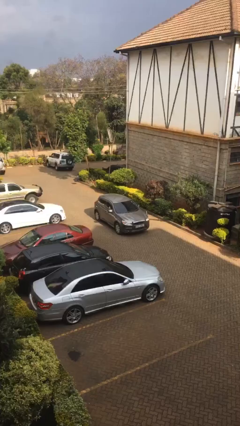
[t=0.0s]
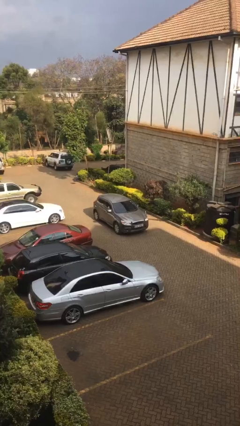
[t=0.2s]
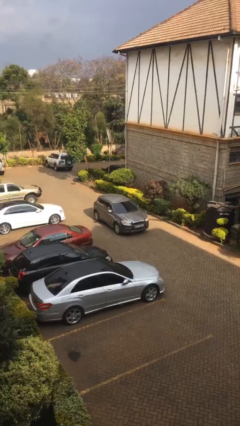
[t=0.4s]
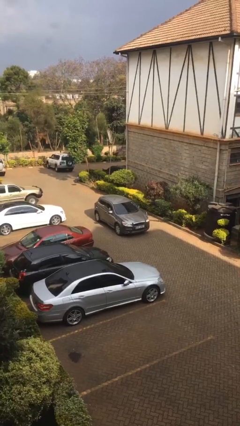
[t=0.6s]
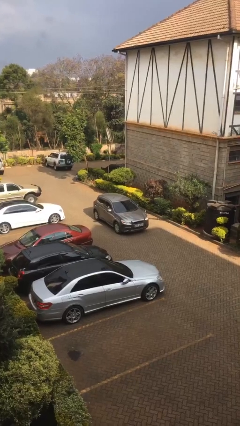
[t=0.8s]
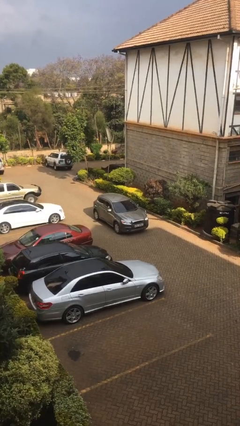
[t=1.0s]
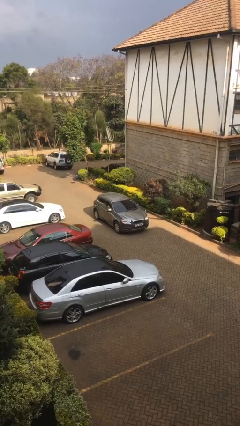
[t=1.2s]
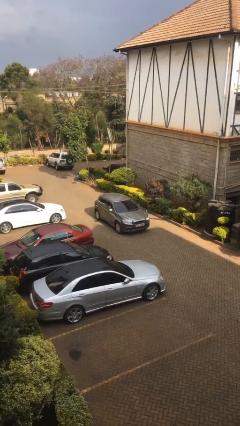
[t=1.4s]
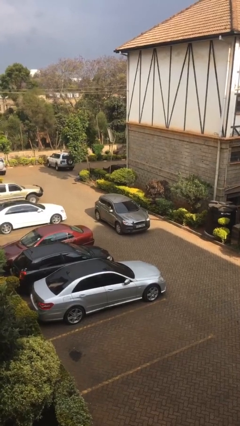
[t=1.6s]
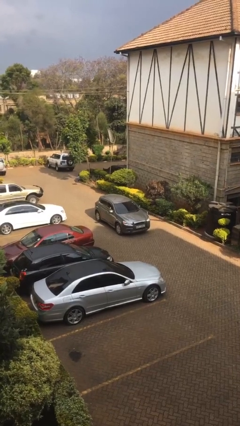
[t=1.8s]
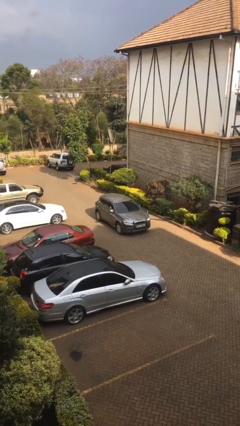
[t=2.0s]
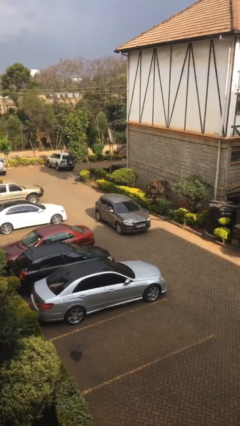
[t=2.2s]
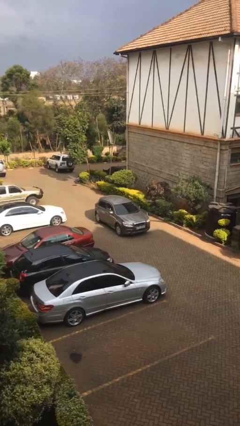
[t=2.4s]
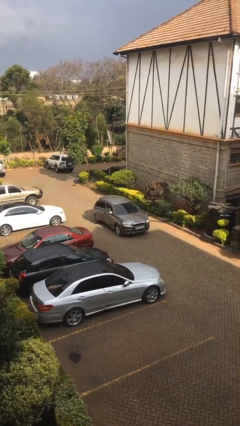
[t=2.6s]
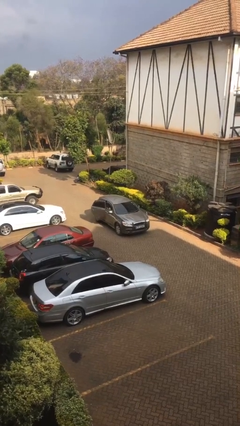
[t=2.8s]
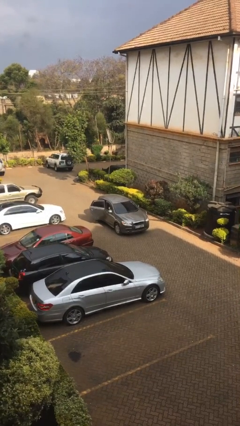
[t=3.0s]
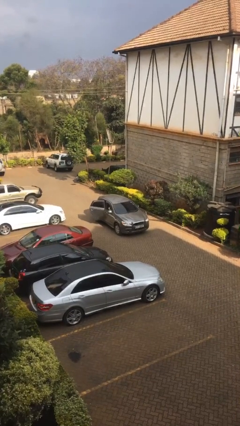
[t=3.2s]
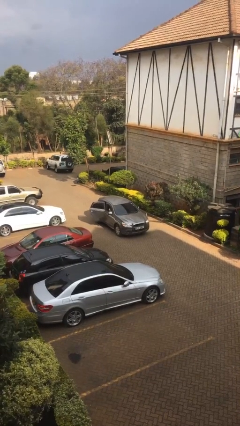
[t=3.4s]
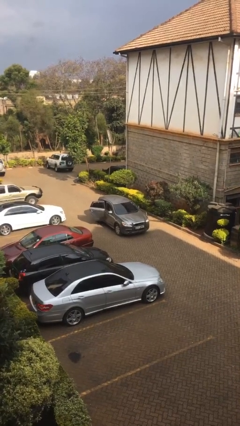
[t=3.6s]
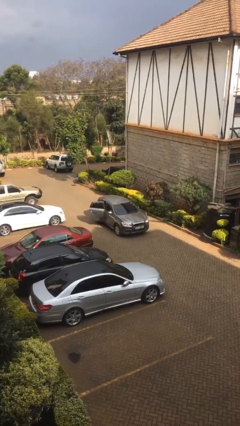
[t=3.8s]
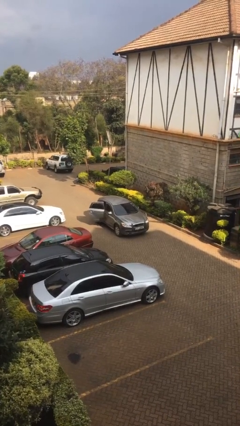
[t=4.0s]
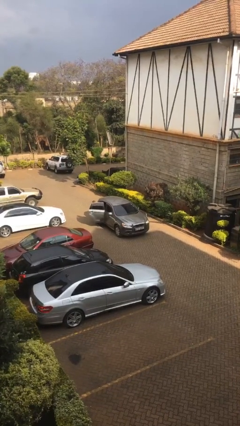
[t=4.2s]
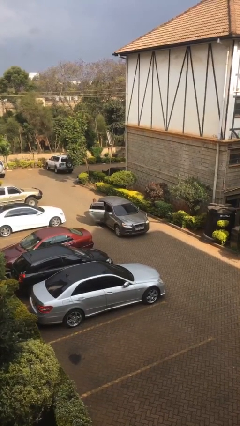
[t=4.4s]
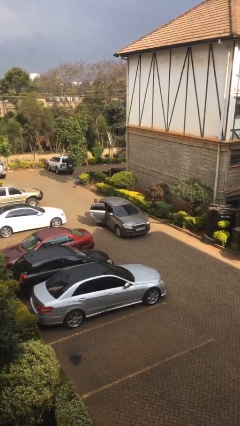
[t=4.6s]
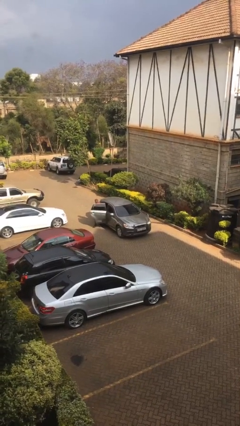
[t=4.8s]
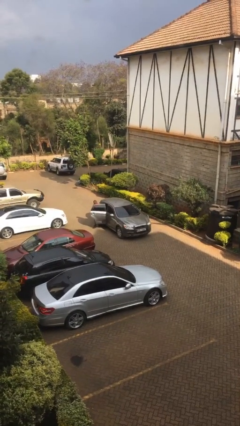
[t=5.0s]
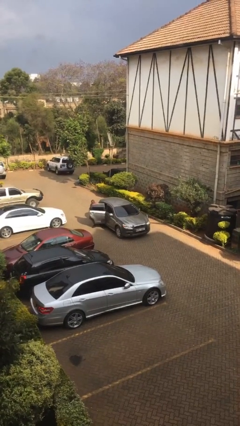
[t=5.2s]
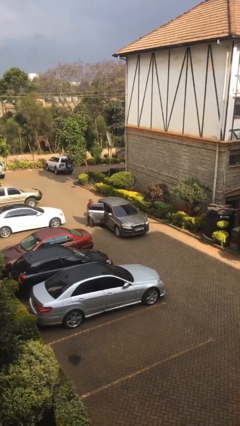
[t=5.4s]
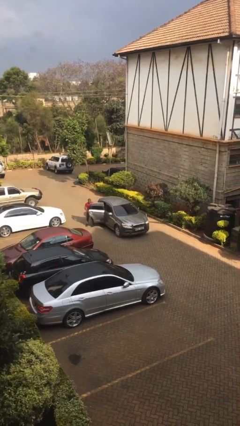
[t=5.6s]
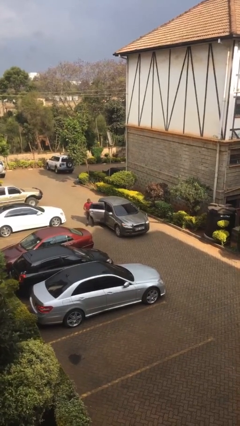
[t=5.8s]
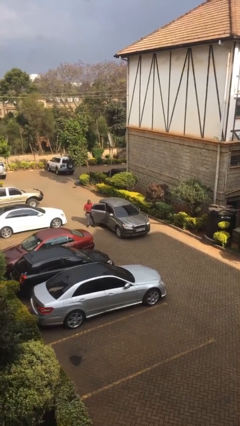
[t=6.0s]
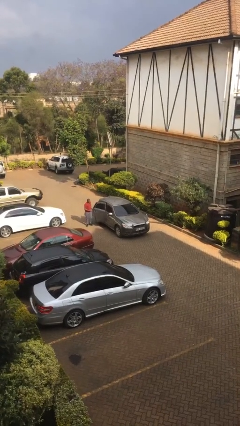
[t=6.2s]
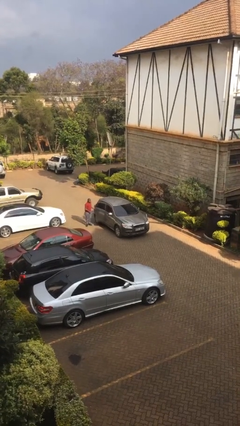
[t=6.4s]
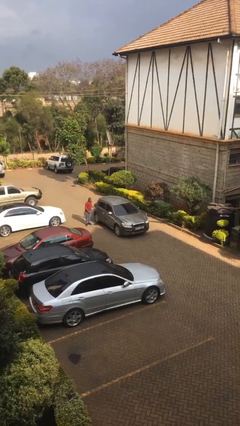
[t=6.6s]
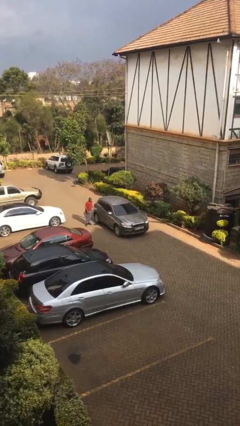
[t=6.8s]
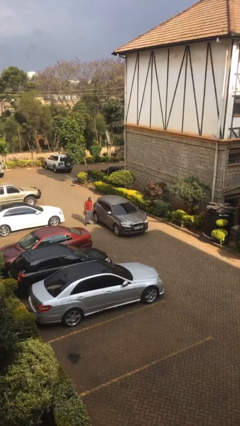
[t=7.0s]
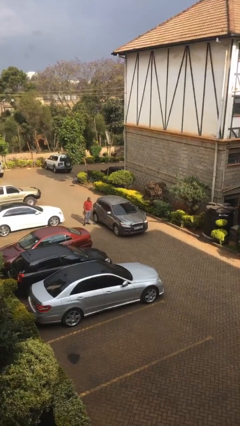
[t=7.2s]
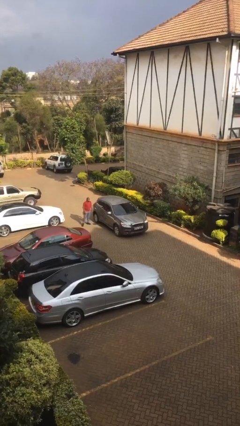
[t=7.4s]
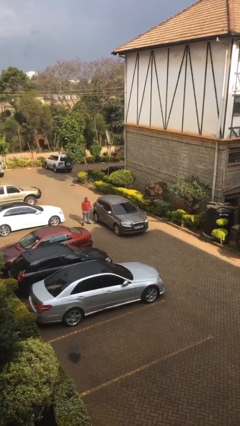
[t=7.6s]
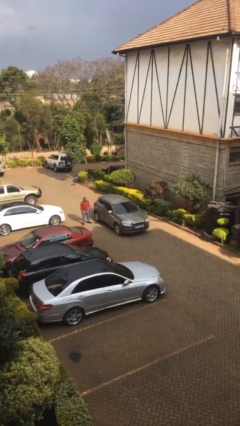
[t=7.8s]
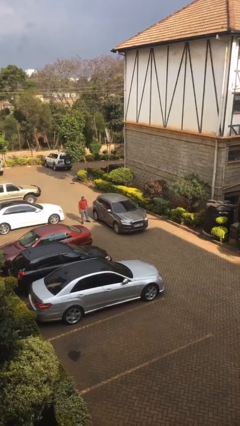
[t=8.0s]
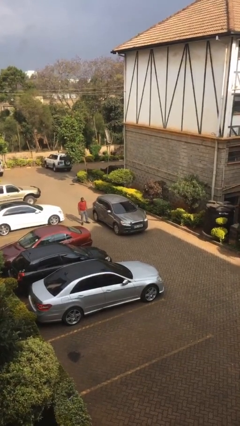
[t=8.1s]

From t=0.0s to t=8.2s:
car drops off person

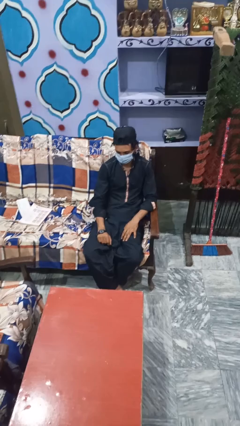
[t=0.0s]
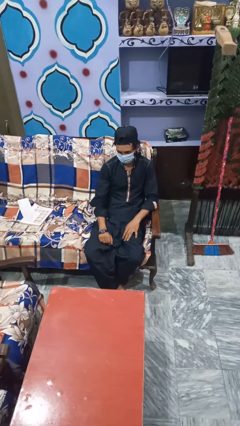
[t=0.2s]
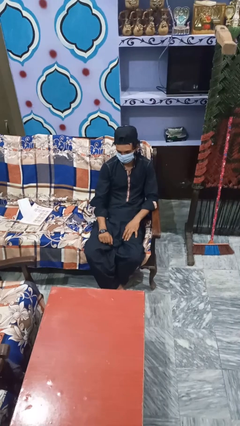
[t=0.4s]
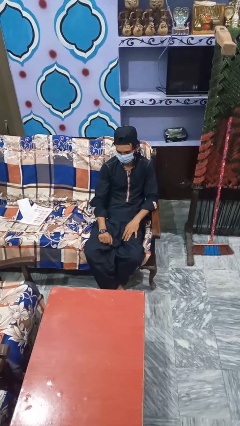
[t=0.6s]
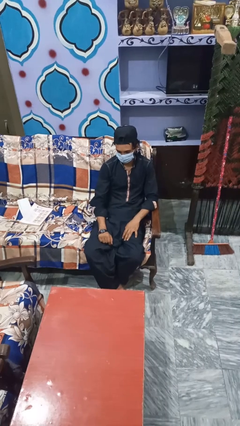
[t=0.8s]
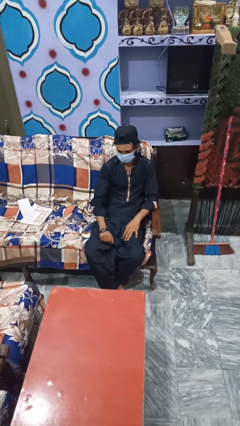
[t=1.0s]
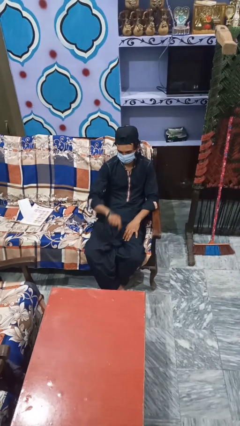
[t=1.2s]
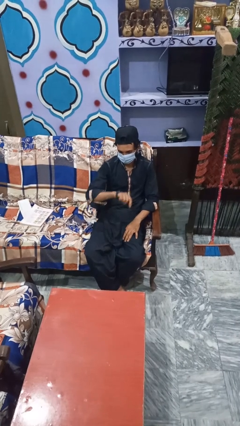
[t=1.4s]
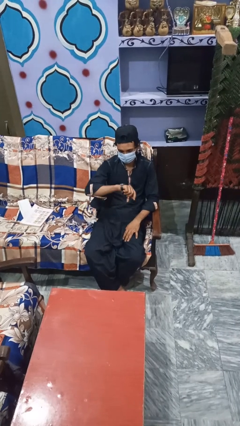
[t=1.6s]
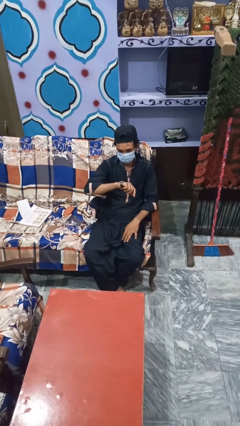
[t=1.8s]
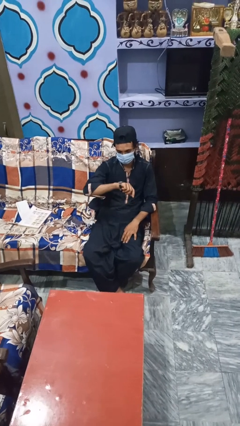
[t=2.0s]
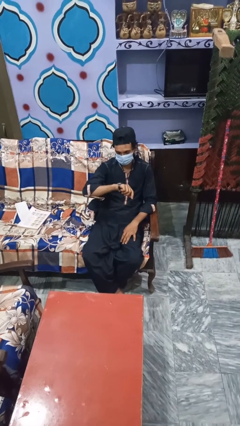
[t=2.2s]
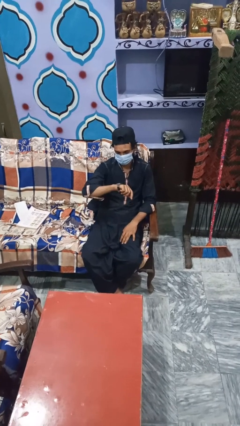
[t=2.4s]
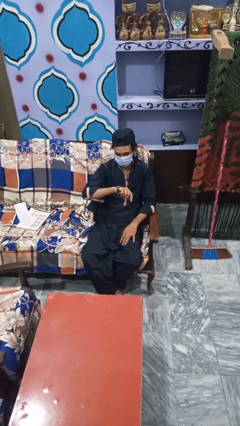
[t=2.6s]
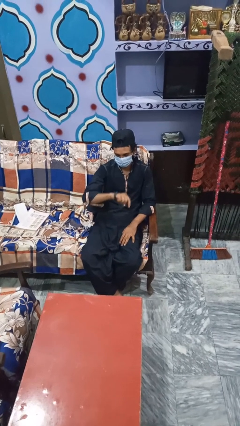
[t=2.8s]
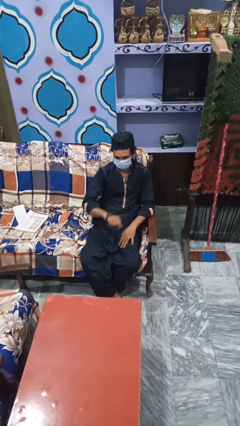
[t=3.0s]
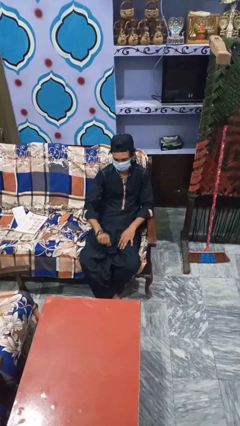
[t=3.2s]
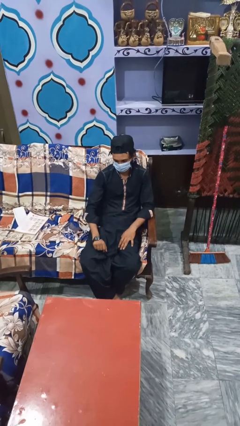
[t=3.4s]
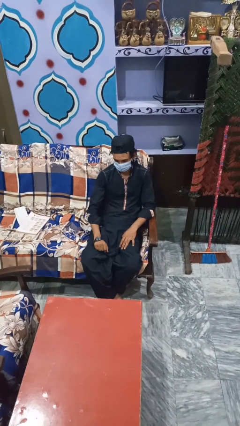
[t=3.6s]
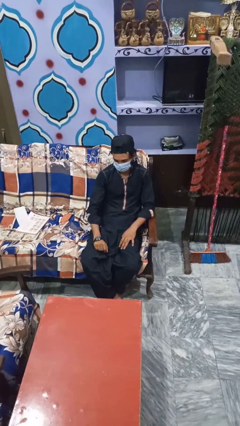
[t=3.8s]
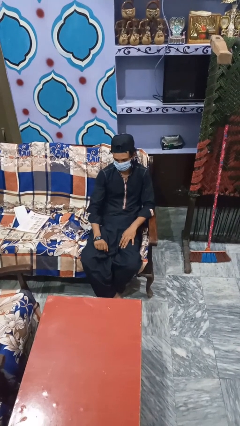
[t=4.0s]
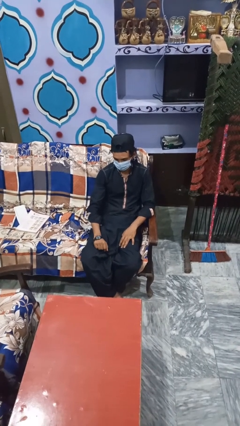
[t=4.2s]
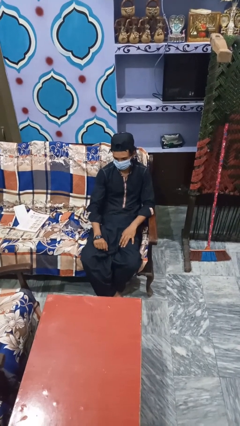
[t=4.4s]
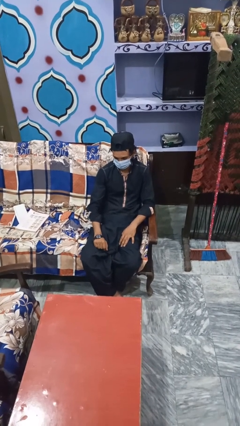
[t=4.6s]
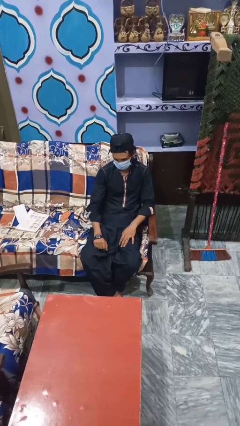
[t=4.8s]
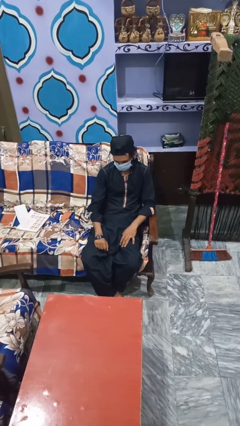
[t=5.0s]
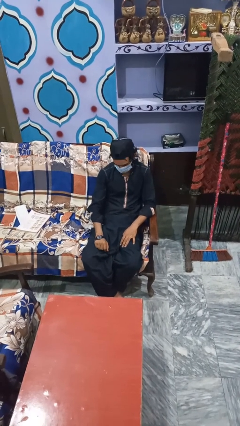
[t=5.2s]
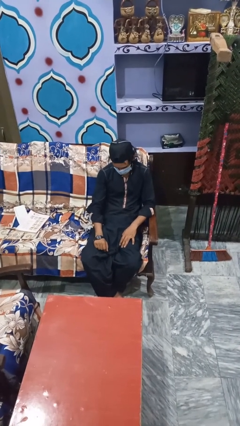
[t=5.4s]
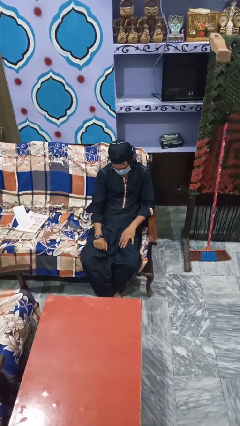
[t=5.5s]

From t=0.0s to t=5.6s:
person looks at wristwatch

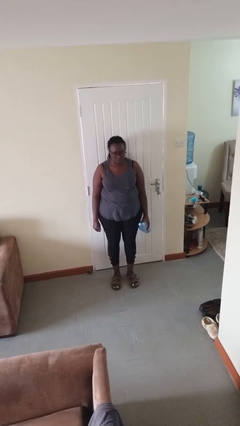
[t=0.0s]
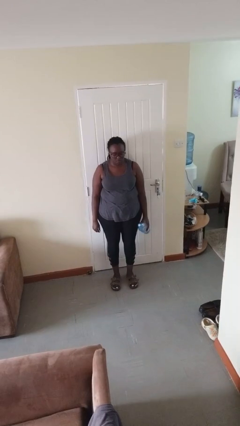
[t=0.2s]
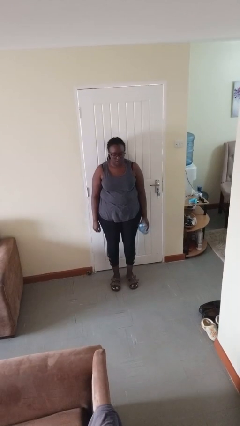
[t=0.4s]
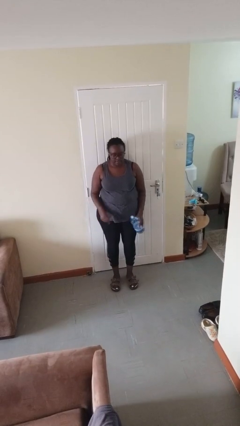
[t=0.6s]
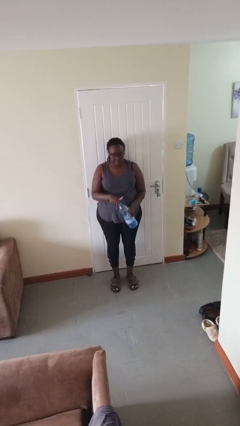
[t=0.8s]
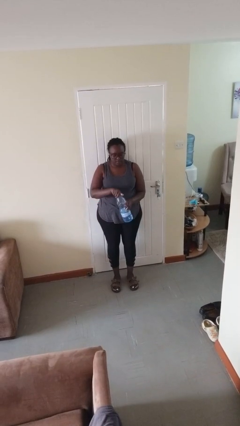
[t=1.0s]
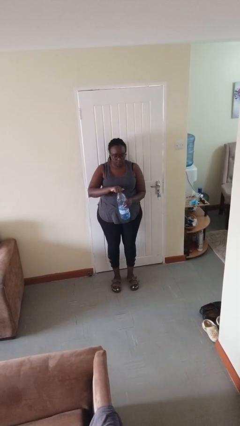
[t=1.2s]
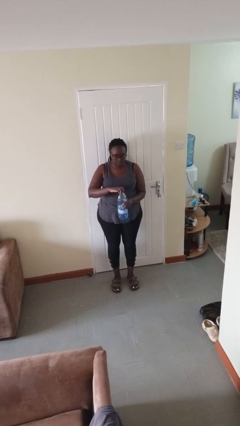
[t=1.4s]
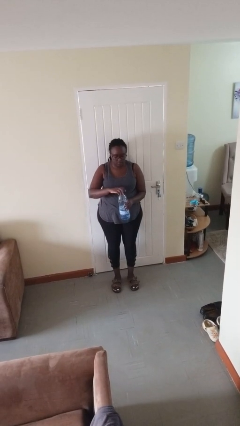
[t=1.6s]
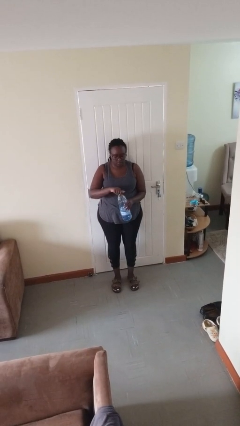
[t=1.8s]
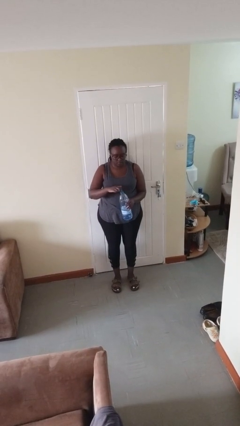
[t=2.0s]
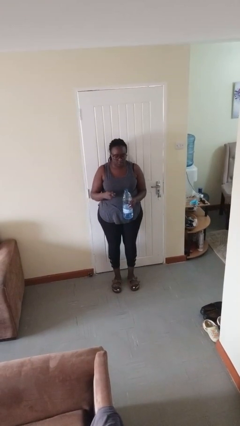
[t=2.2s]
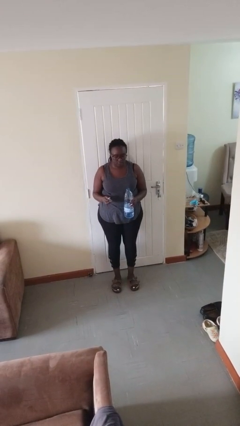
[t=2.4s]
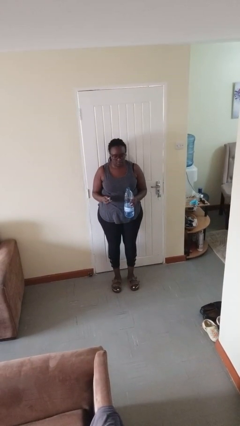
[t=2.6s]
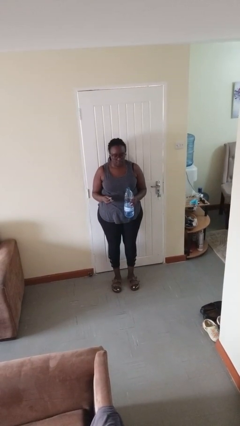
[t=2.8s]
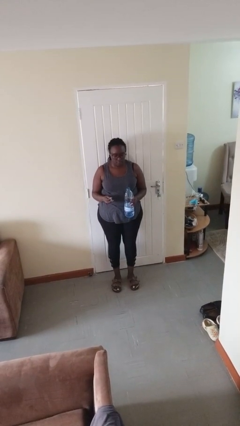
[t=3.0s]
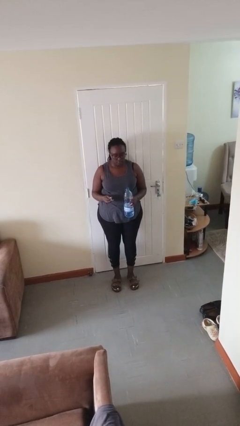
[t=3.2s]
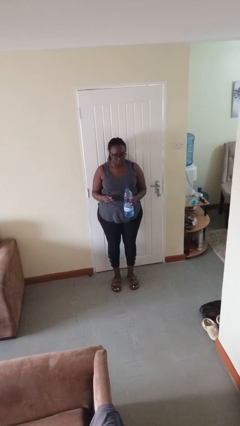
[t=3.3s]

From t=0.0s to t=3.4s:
person unscrews lid from bottle

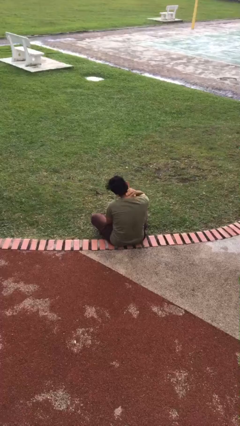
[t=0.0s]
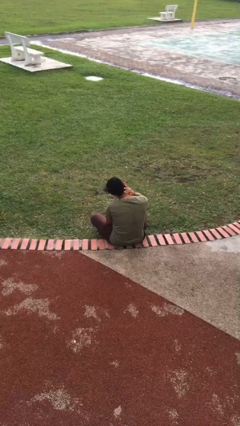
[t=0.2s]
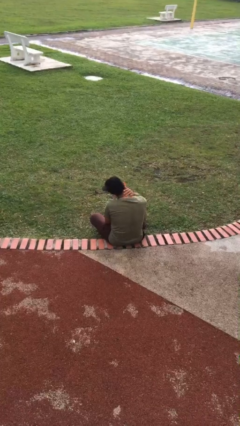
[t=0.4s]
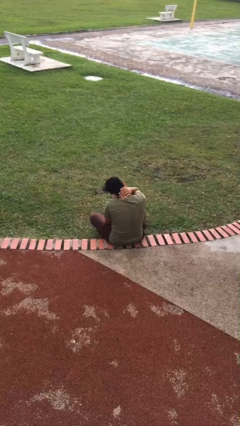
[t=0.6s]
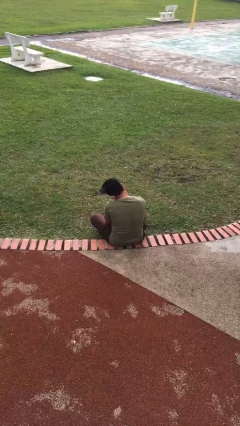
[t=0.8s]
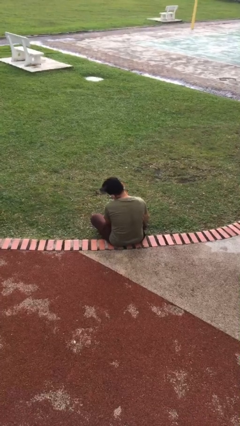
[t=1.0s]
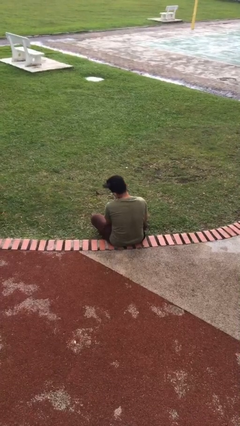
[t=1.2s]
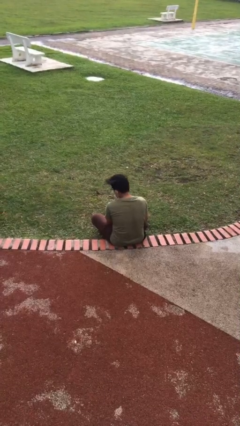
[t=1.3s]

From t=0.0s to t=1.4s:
person rubs neck
